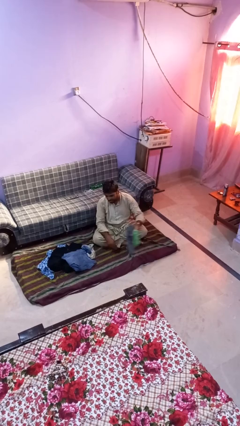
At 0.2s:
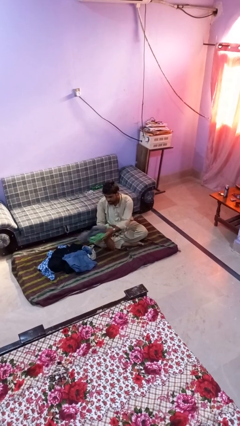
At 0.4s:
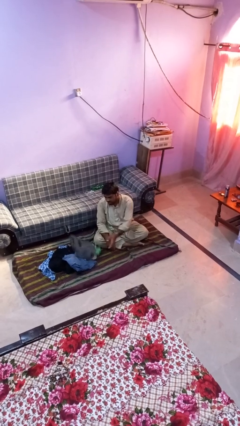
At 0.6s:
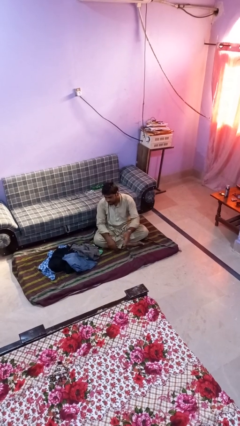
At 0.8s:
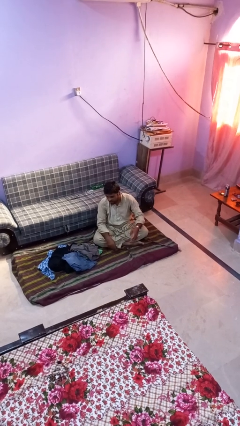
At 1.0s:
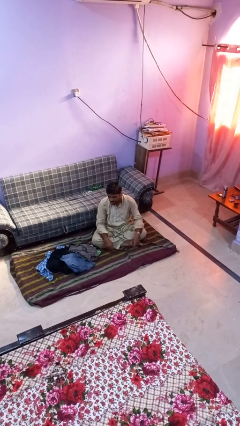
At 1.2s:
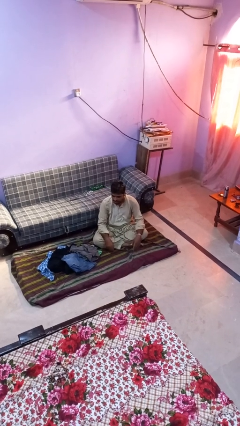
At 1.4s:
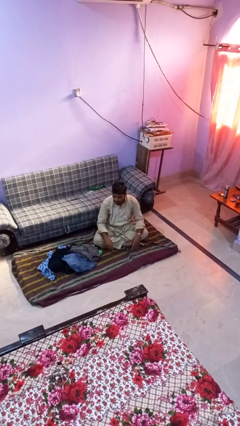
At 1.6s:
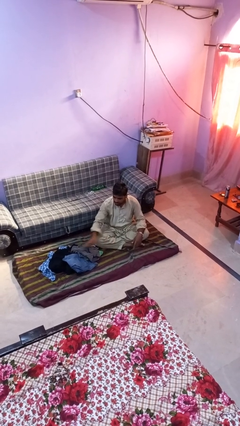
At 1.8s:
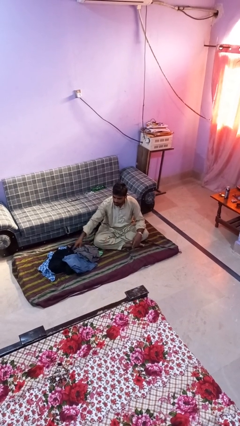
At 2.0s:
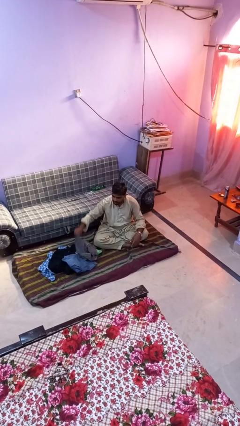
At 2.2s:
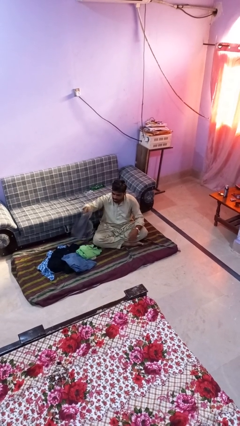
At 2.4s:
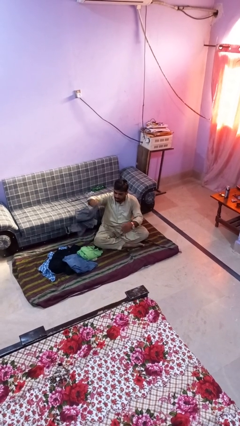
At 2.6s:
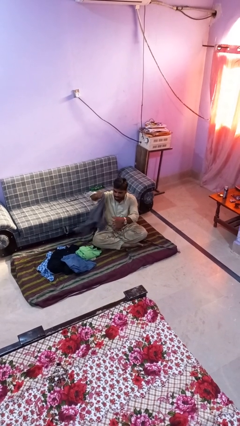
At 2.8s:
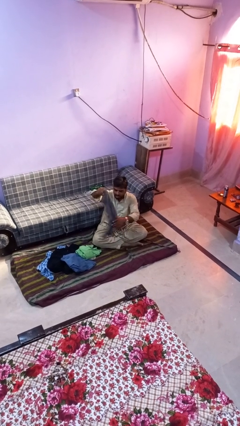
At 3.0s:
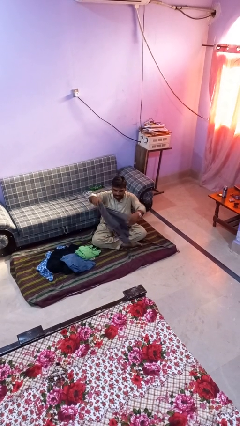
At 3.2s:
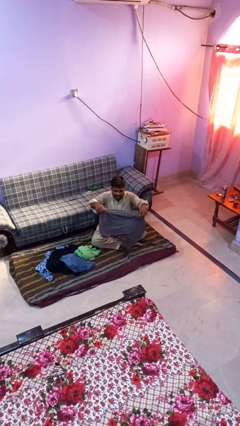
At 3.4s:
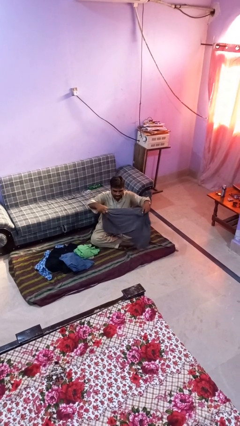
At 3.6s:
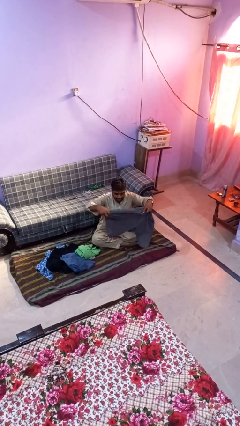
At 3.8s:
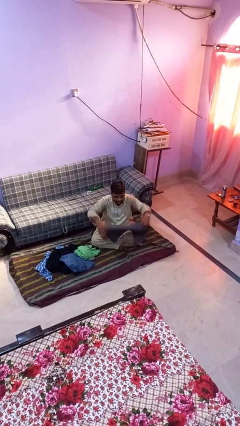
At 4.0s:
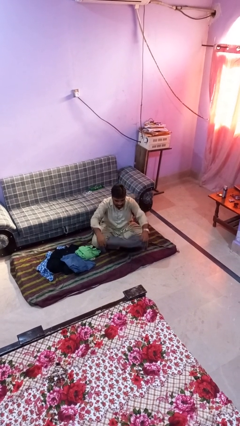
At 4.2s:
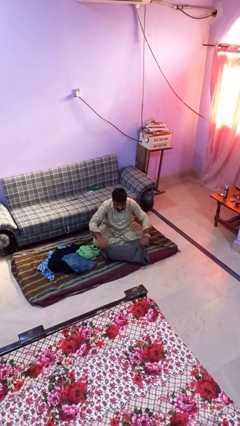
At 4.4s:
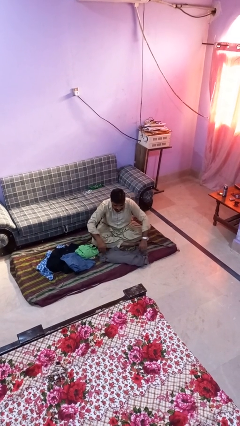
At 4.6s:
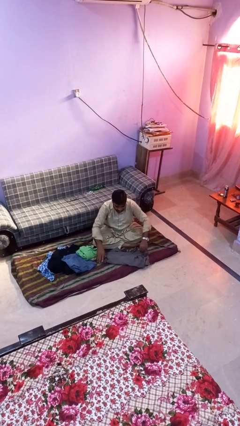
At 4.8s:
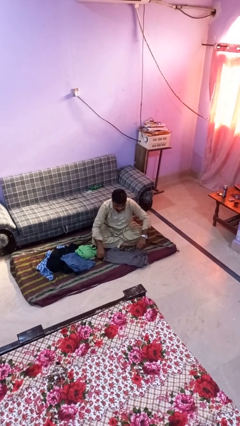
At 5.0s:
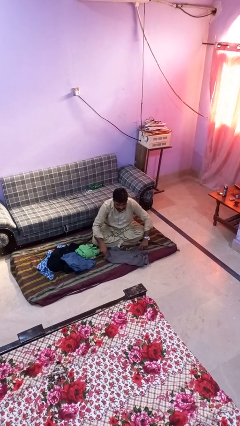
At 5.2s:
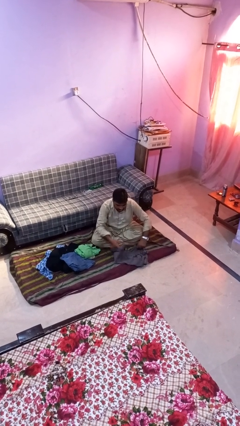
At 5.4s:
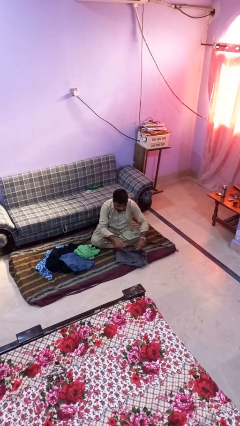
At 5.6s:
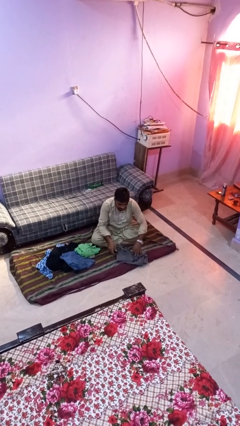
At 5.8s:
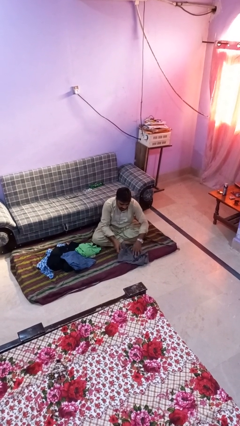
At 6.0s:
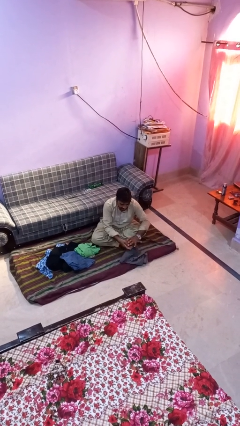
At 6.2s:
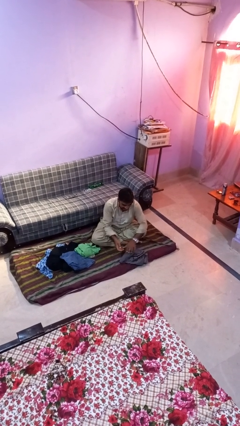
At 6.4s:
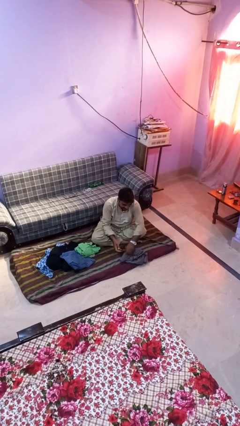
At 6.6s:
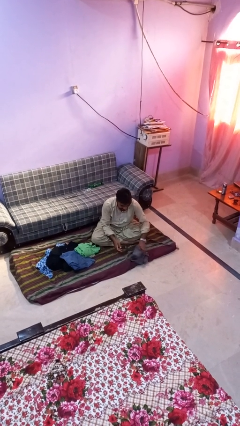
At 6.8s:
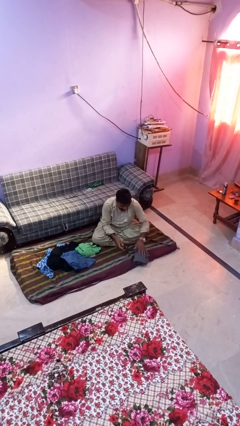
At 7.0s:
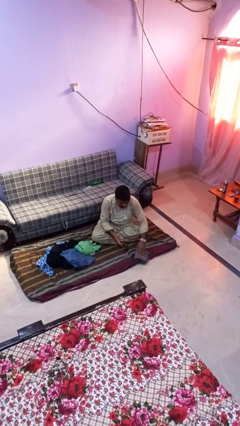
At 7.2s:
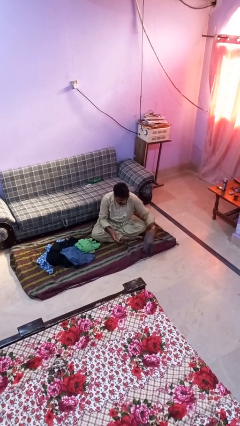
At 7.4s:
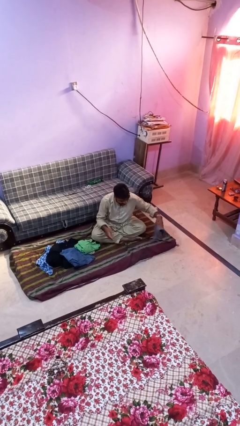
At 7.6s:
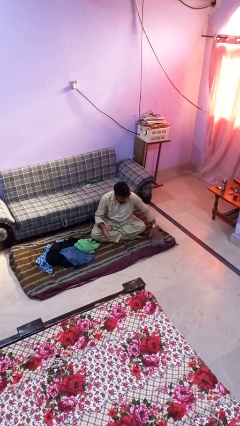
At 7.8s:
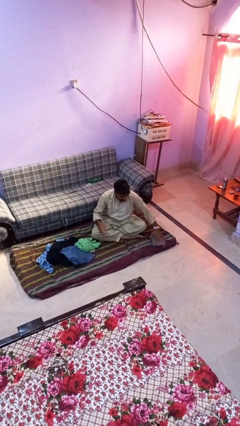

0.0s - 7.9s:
person folds shirt

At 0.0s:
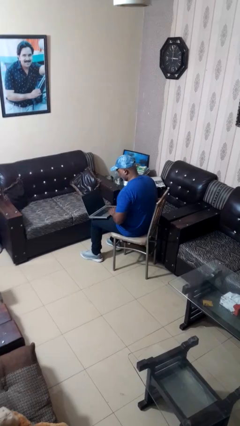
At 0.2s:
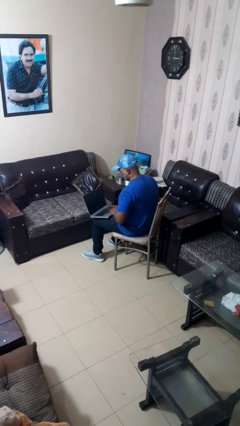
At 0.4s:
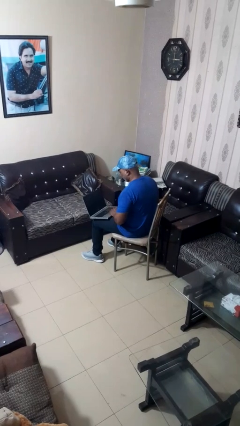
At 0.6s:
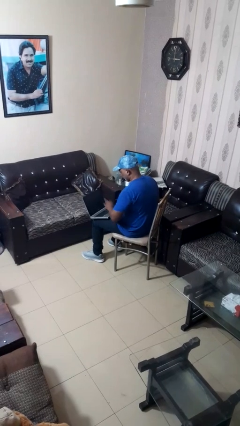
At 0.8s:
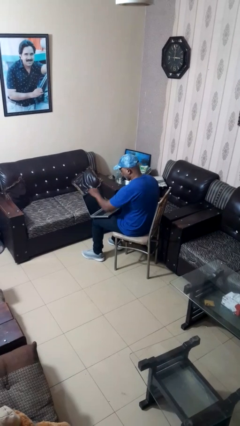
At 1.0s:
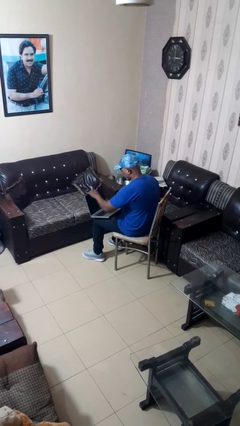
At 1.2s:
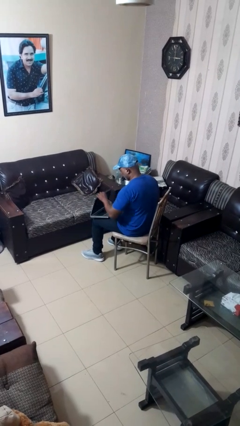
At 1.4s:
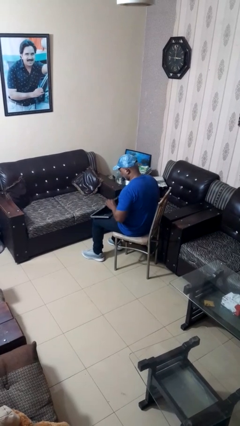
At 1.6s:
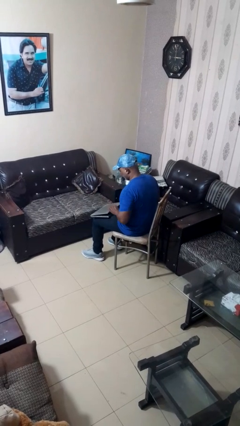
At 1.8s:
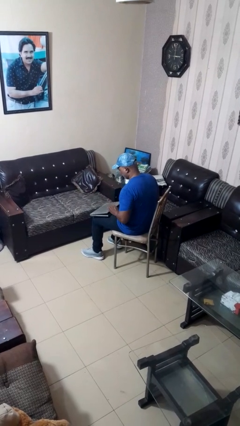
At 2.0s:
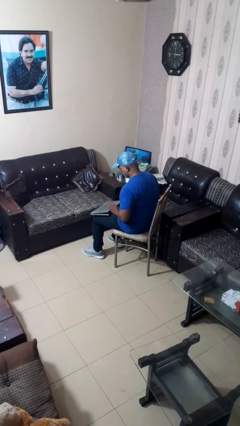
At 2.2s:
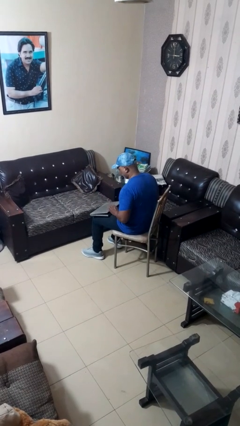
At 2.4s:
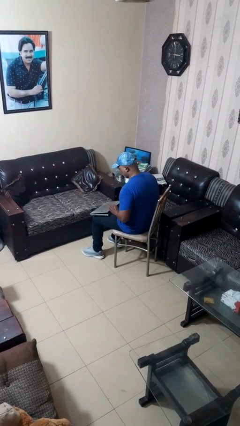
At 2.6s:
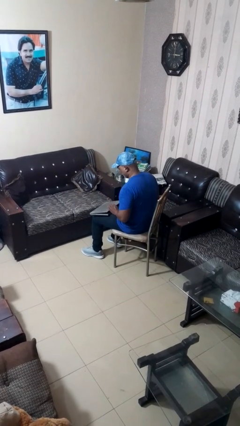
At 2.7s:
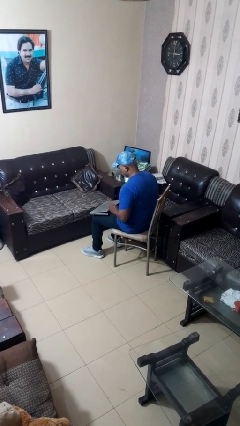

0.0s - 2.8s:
person closes laptop

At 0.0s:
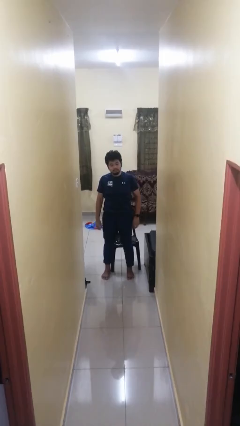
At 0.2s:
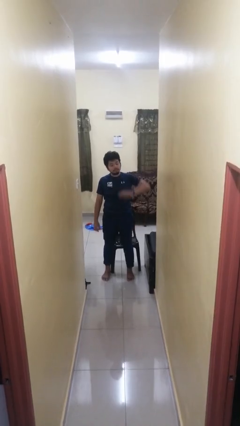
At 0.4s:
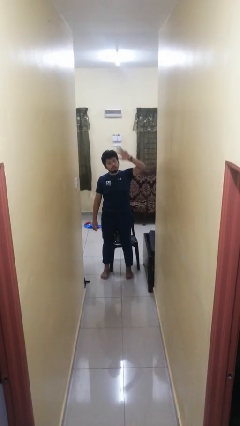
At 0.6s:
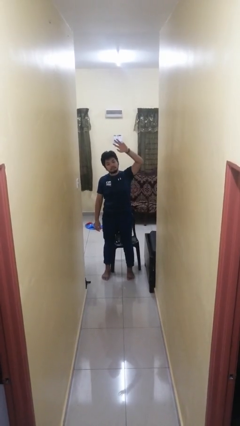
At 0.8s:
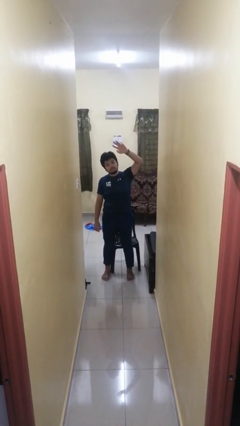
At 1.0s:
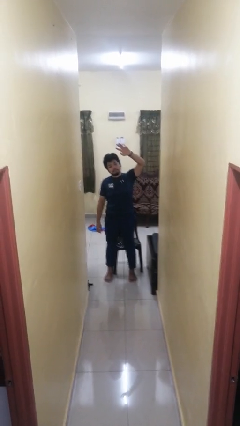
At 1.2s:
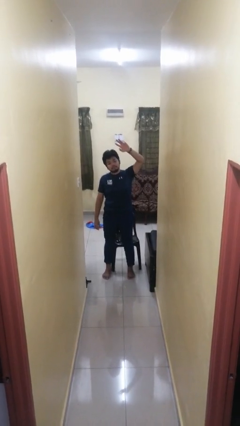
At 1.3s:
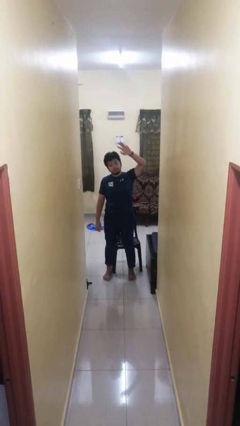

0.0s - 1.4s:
person gestures swipe up

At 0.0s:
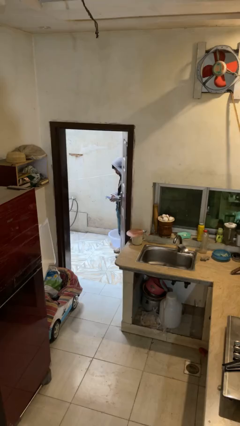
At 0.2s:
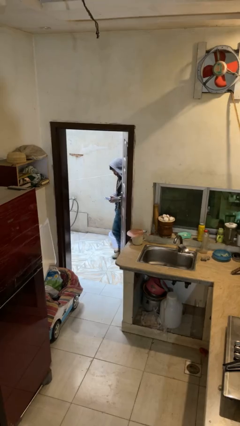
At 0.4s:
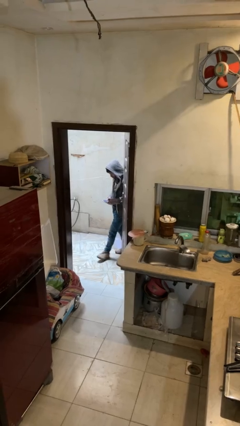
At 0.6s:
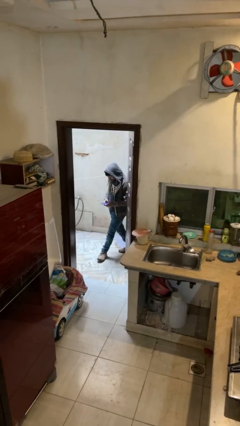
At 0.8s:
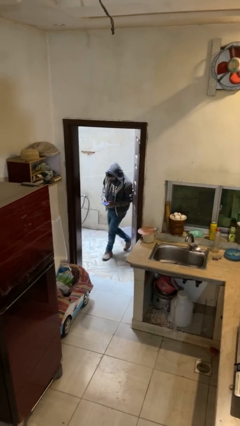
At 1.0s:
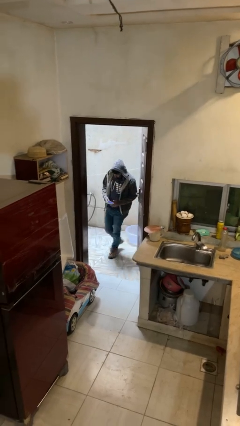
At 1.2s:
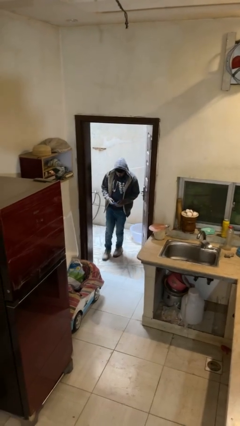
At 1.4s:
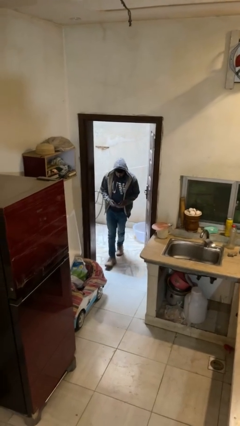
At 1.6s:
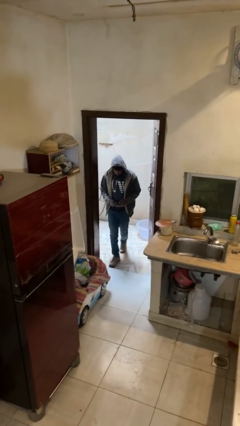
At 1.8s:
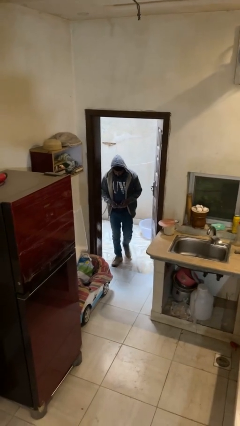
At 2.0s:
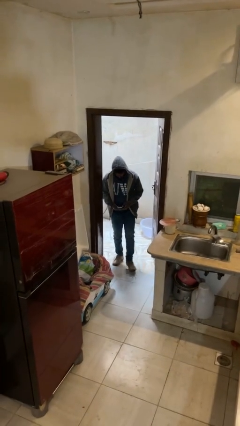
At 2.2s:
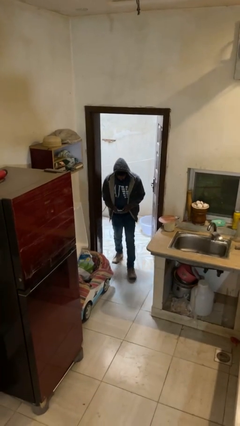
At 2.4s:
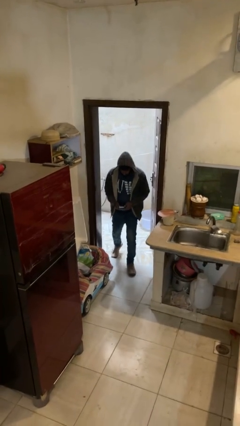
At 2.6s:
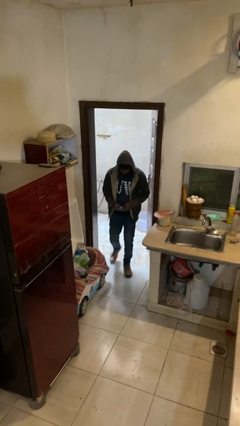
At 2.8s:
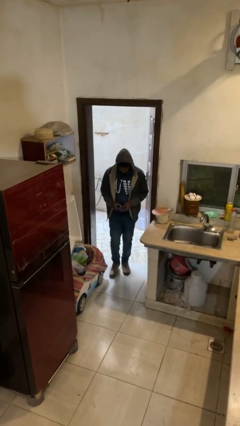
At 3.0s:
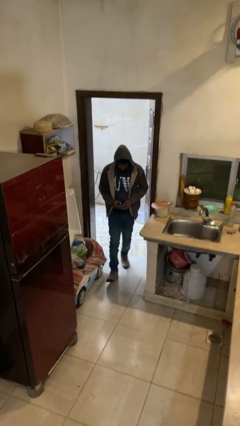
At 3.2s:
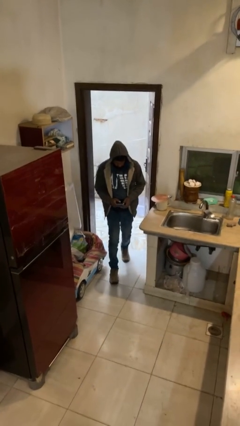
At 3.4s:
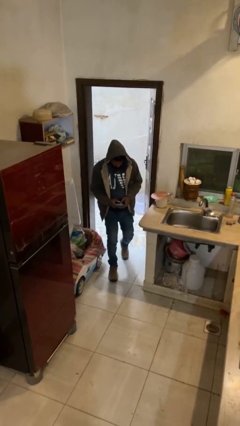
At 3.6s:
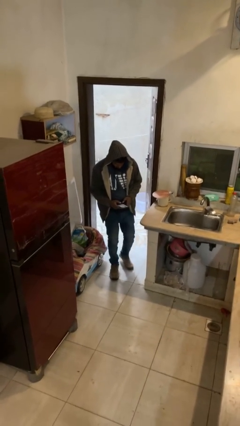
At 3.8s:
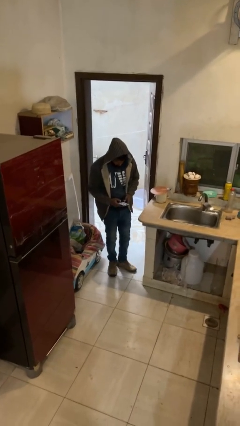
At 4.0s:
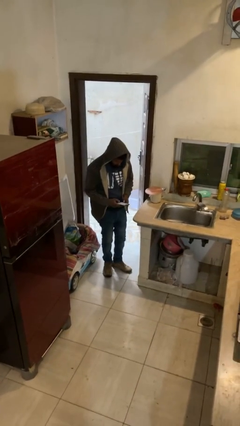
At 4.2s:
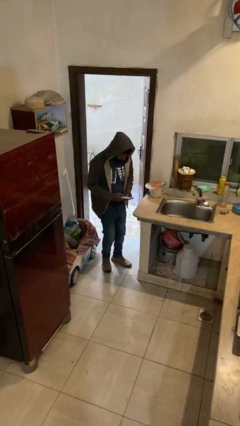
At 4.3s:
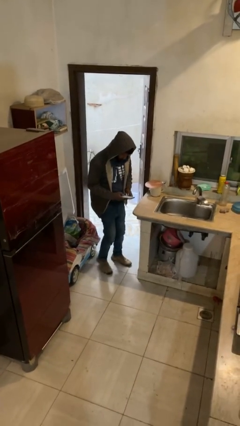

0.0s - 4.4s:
person enters scene through structure

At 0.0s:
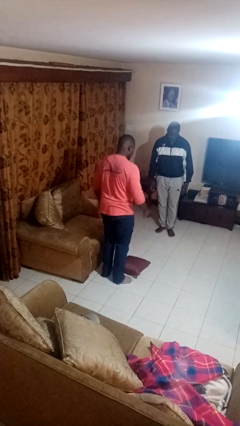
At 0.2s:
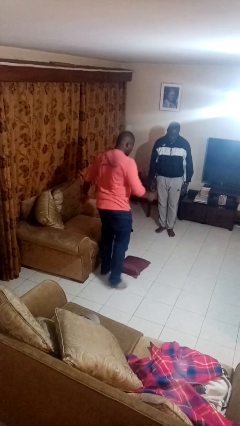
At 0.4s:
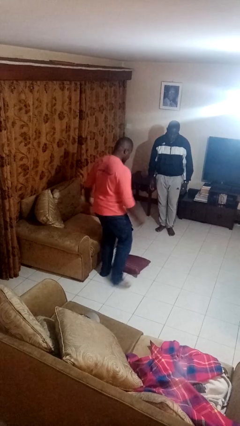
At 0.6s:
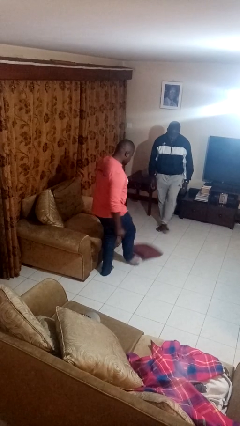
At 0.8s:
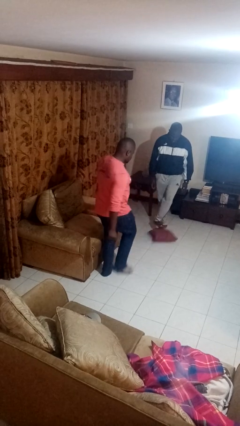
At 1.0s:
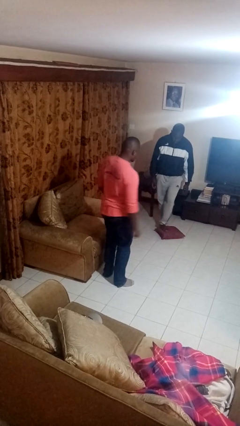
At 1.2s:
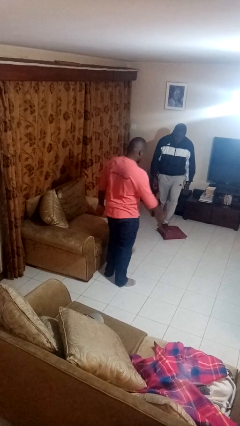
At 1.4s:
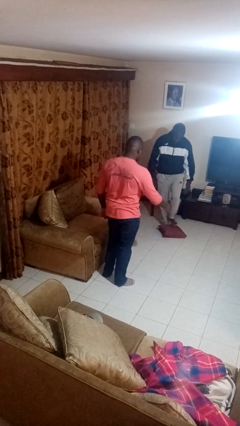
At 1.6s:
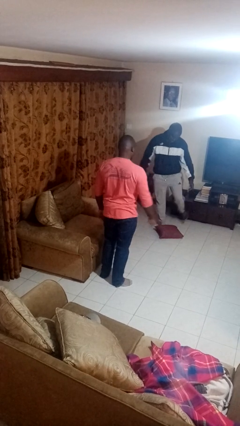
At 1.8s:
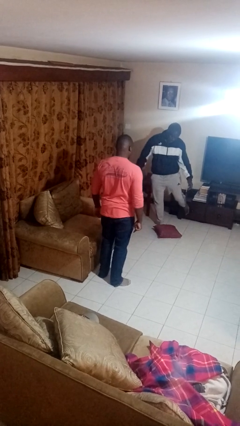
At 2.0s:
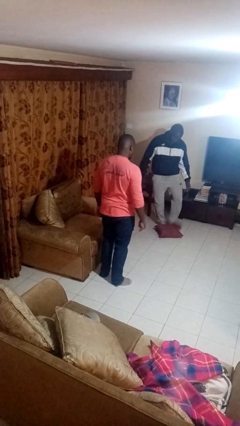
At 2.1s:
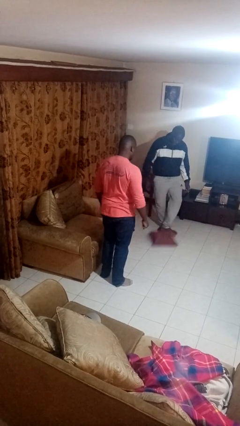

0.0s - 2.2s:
person kicks object to person
